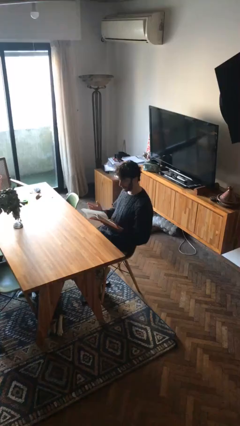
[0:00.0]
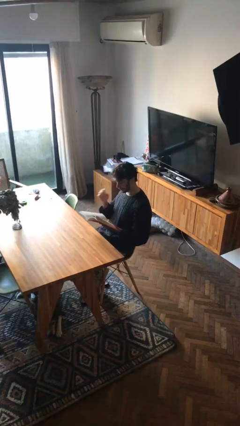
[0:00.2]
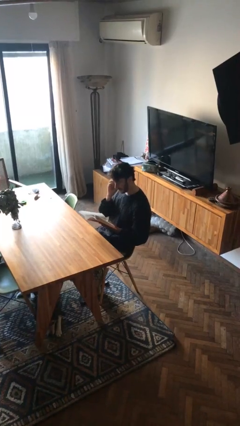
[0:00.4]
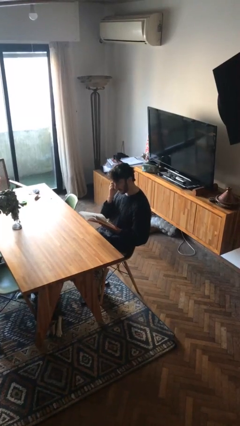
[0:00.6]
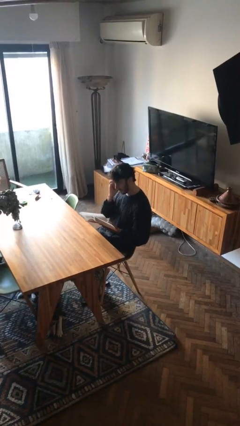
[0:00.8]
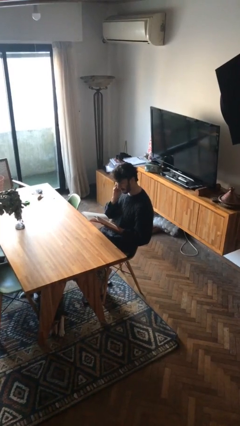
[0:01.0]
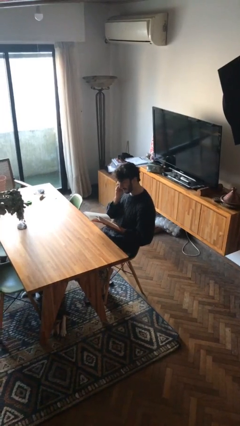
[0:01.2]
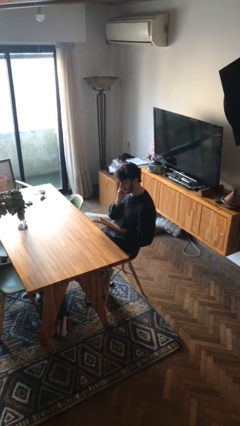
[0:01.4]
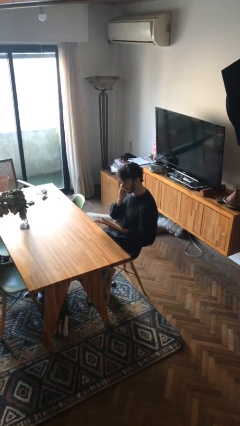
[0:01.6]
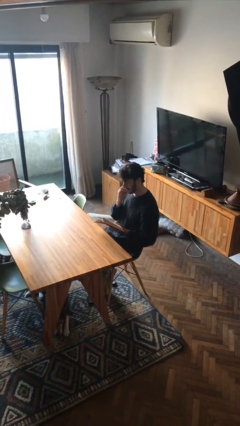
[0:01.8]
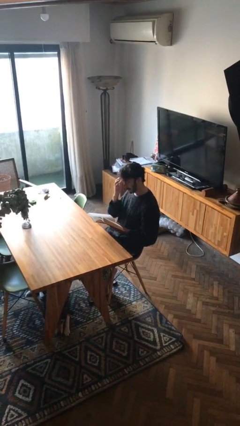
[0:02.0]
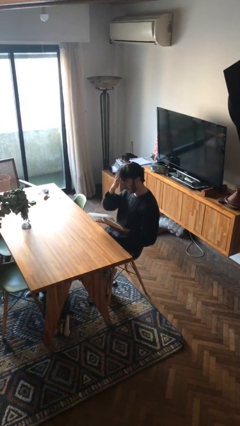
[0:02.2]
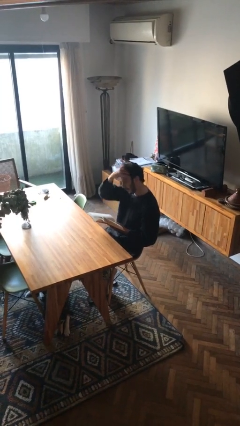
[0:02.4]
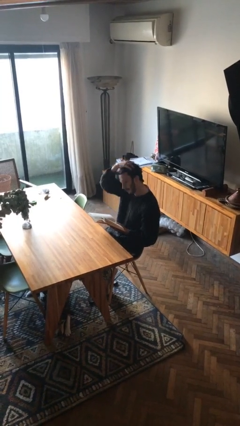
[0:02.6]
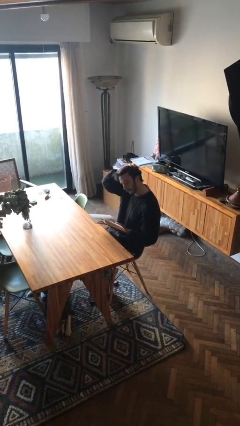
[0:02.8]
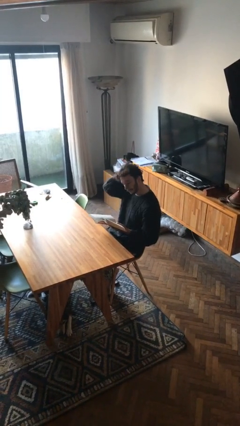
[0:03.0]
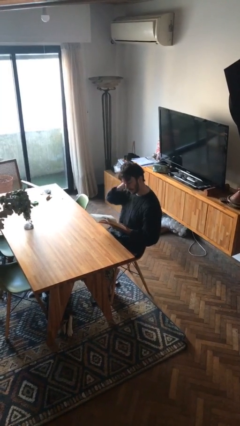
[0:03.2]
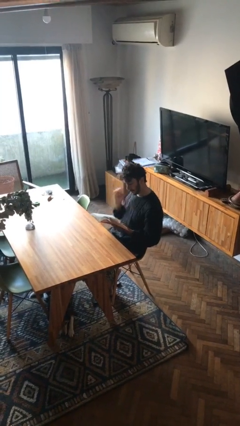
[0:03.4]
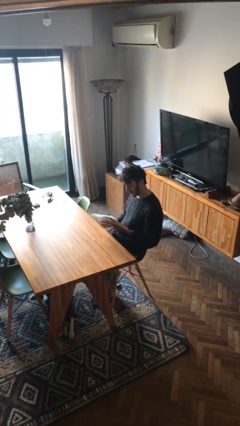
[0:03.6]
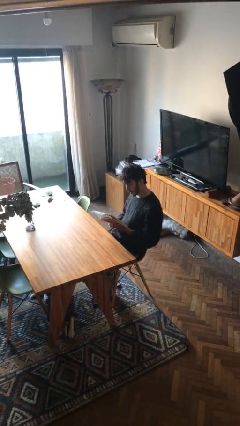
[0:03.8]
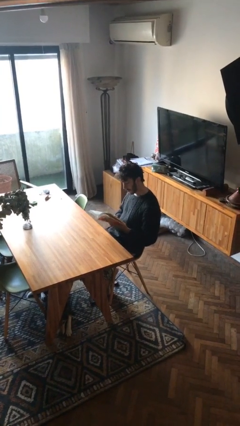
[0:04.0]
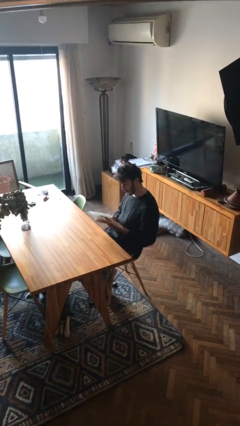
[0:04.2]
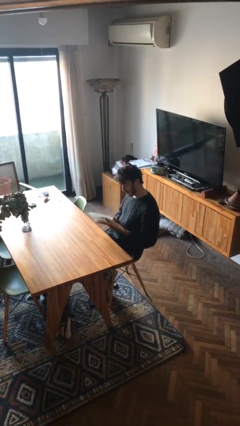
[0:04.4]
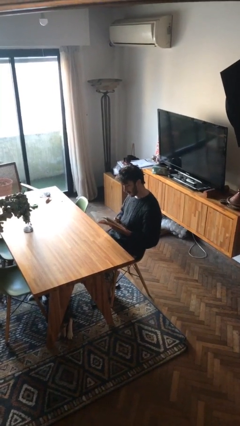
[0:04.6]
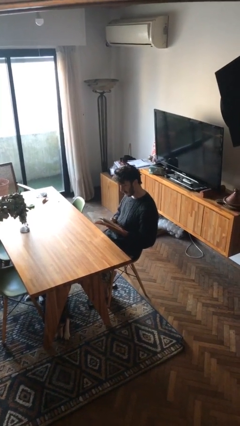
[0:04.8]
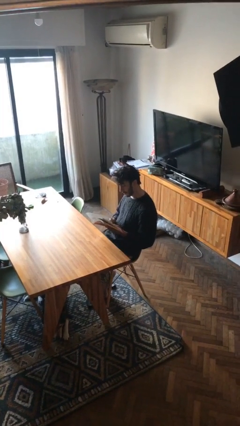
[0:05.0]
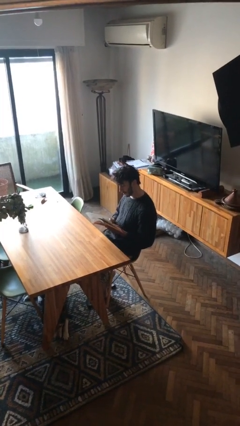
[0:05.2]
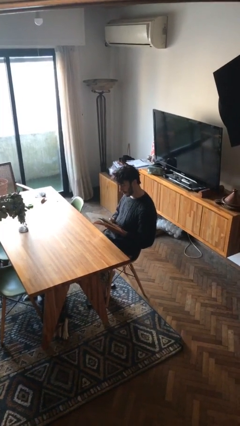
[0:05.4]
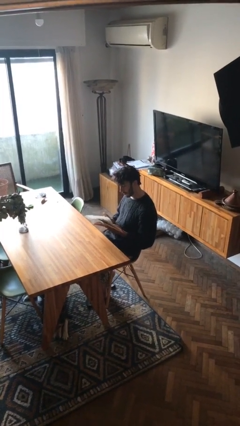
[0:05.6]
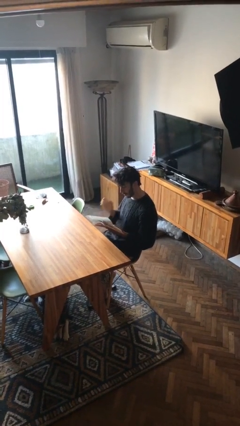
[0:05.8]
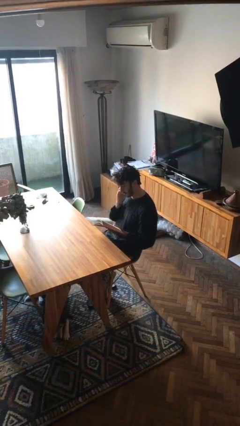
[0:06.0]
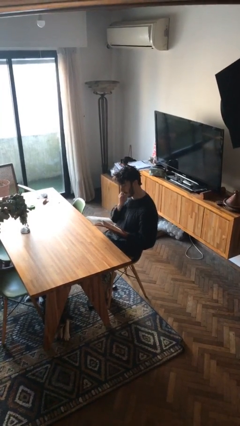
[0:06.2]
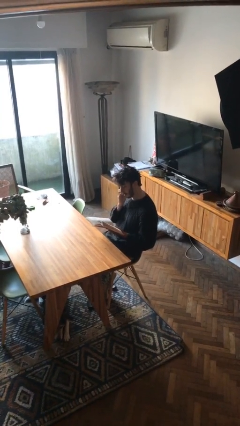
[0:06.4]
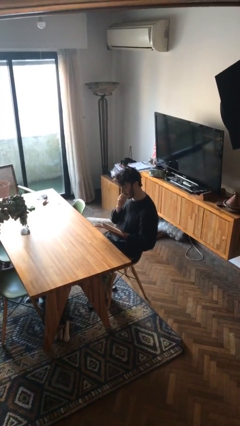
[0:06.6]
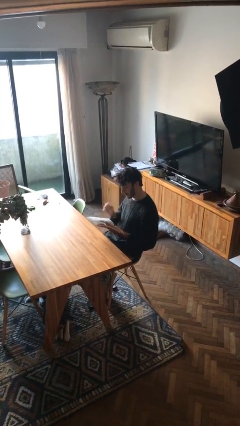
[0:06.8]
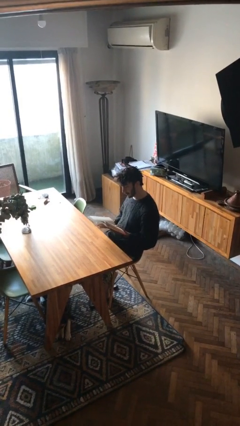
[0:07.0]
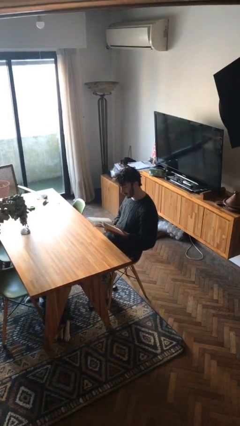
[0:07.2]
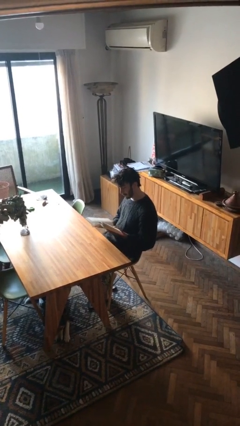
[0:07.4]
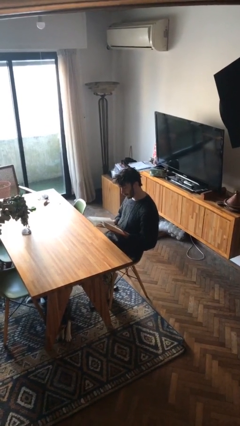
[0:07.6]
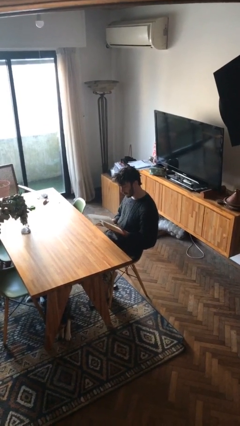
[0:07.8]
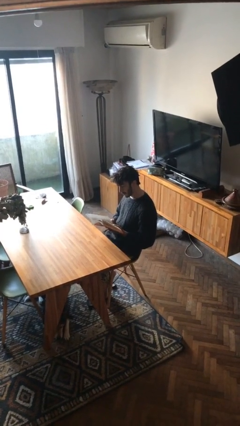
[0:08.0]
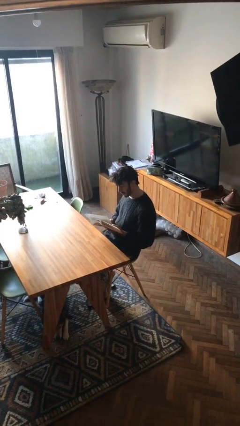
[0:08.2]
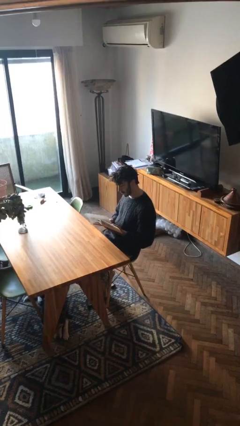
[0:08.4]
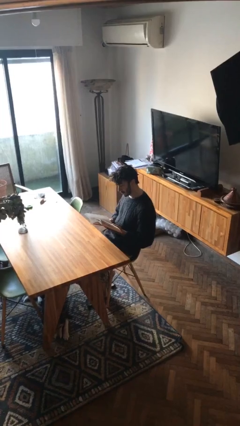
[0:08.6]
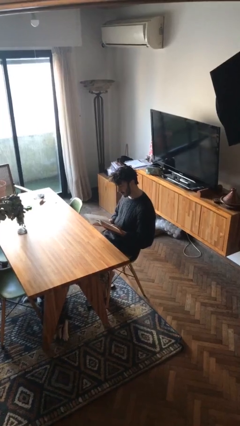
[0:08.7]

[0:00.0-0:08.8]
person reads document

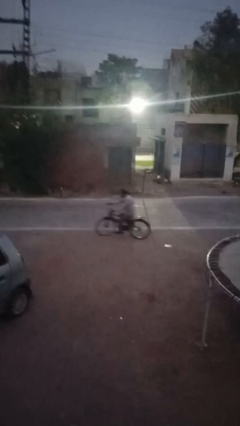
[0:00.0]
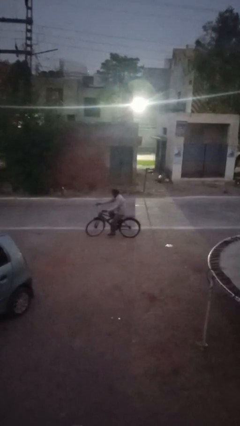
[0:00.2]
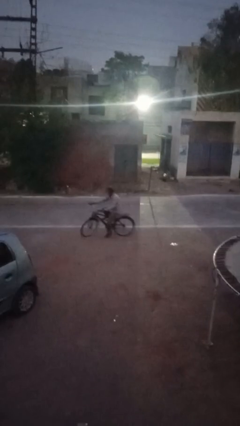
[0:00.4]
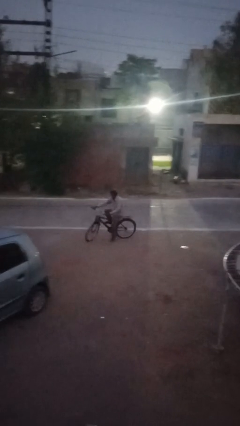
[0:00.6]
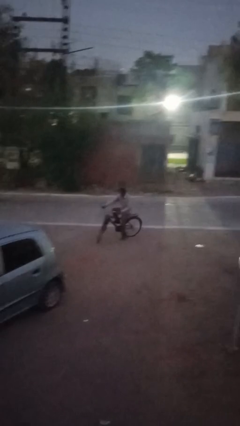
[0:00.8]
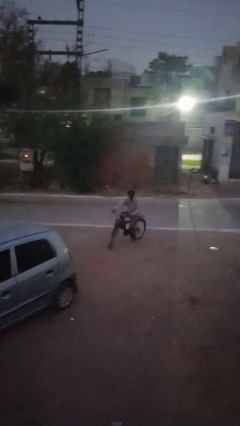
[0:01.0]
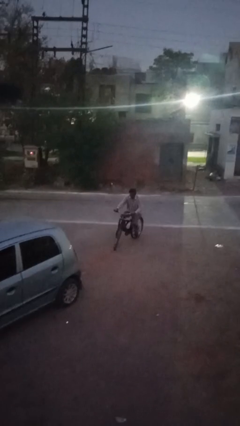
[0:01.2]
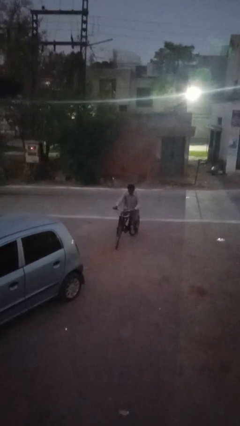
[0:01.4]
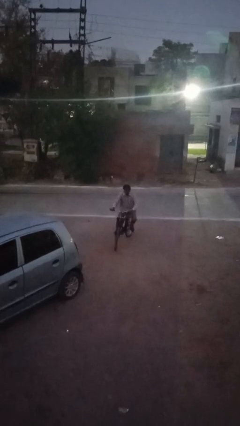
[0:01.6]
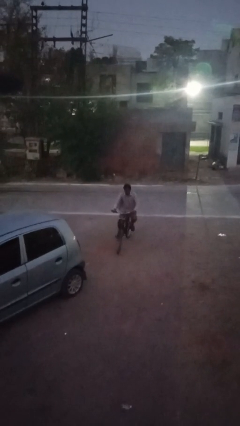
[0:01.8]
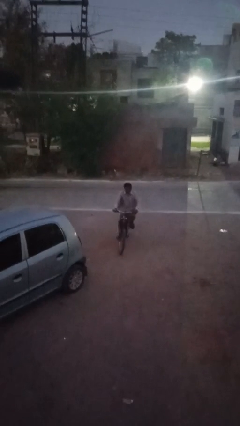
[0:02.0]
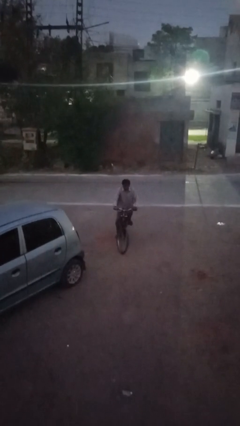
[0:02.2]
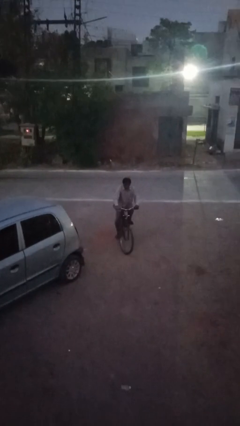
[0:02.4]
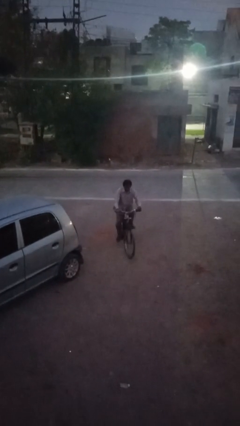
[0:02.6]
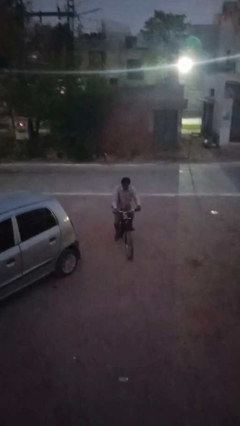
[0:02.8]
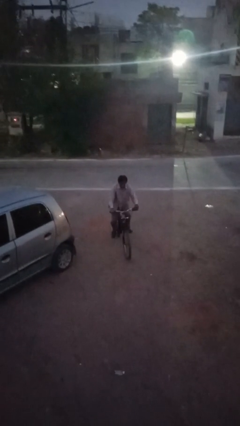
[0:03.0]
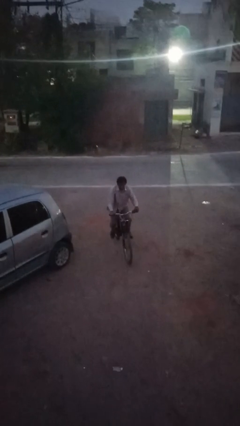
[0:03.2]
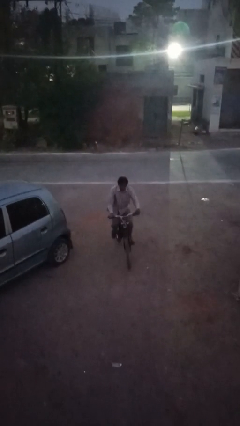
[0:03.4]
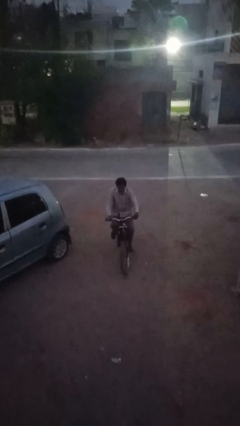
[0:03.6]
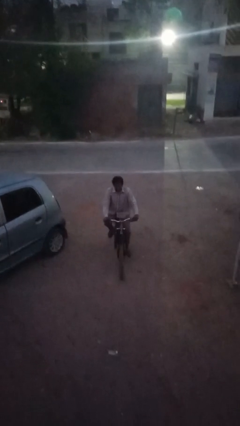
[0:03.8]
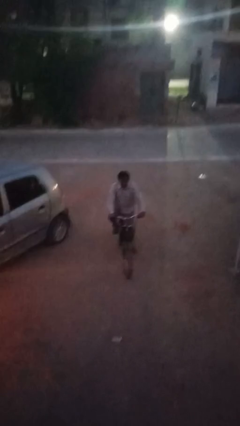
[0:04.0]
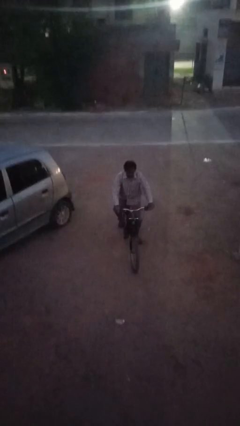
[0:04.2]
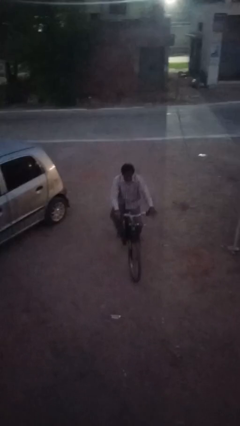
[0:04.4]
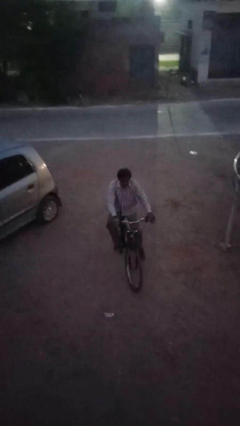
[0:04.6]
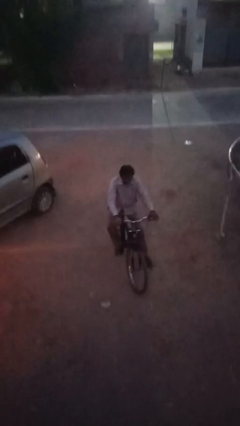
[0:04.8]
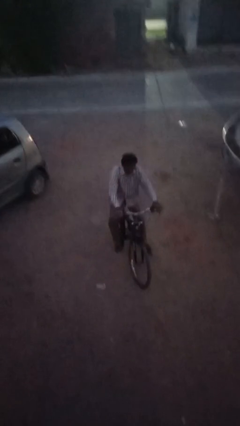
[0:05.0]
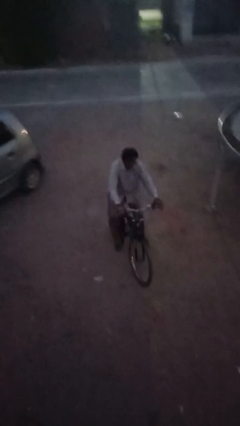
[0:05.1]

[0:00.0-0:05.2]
person rides bicycle

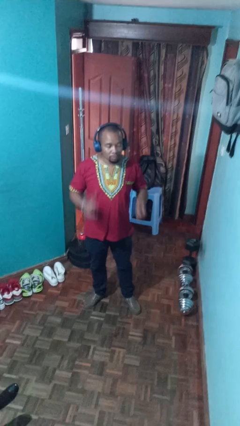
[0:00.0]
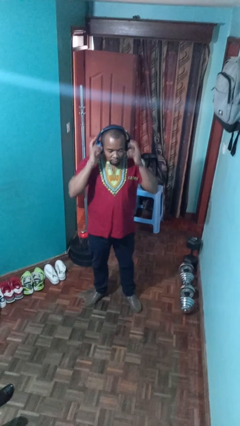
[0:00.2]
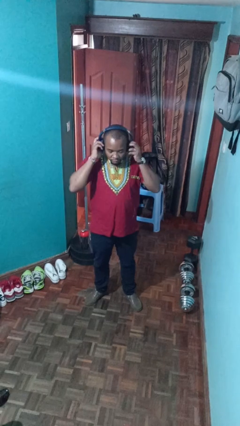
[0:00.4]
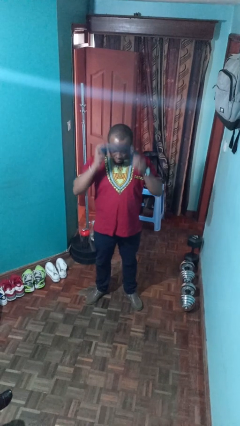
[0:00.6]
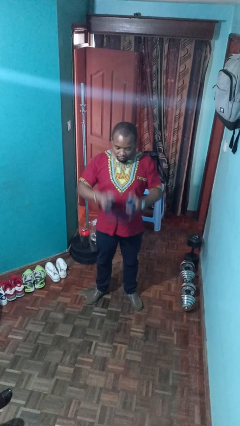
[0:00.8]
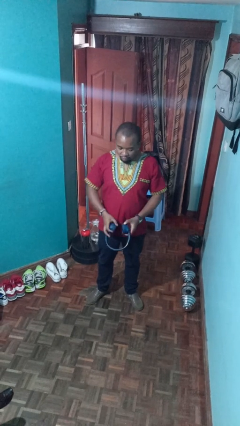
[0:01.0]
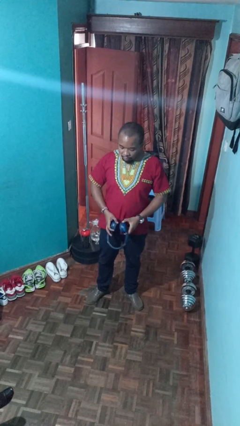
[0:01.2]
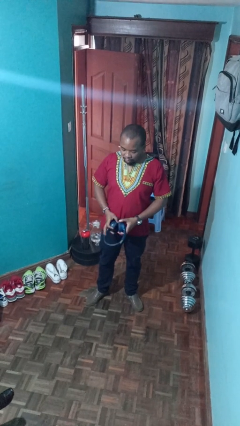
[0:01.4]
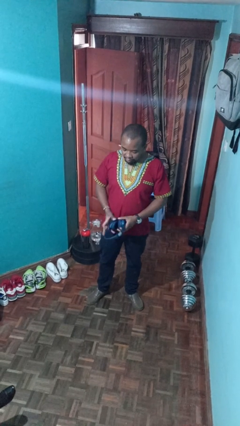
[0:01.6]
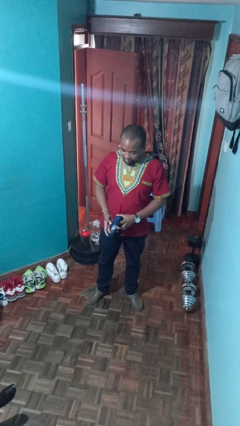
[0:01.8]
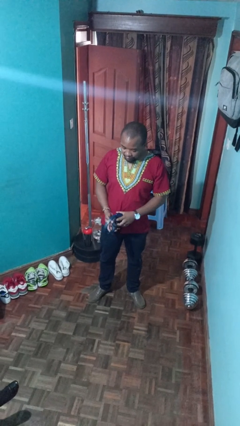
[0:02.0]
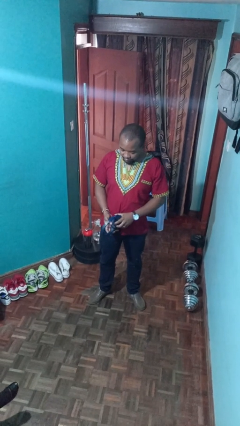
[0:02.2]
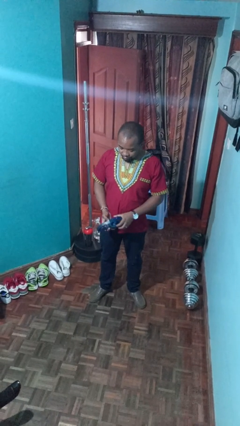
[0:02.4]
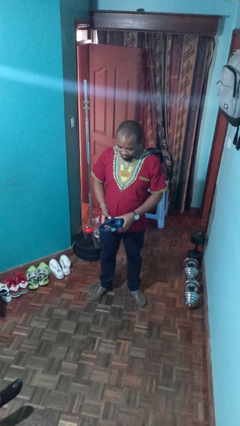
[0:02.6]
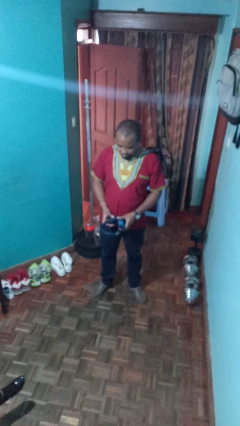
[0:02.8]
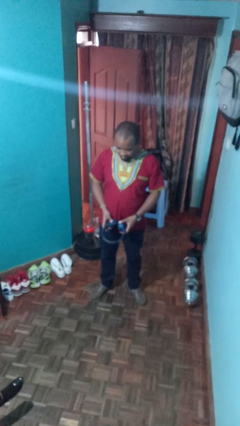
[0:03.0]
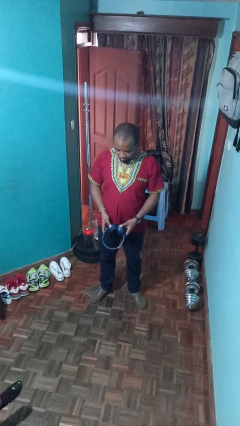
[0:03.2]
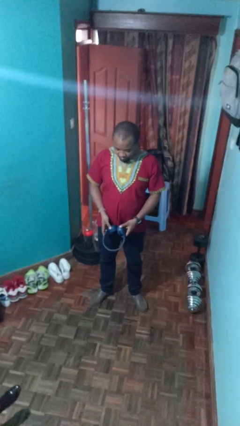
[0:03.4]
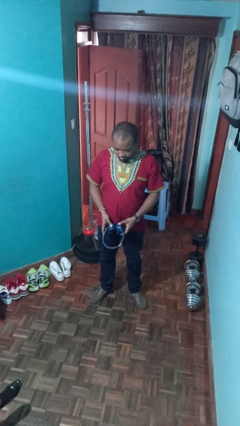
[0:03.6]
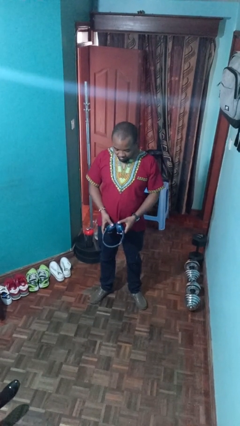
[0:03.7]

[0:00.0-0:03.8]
person takes off headphones
